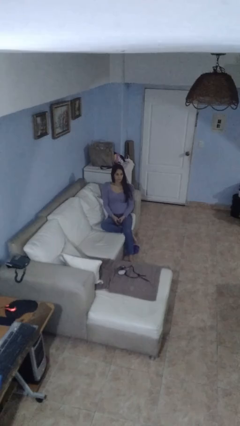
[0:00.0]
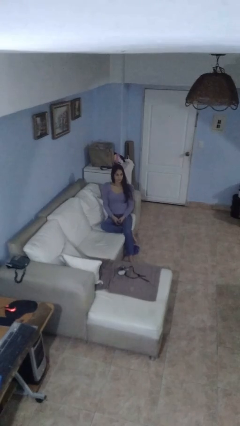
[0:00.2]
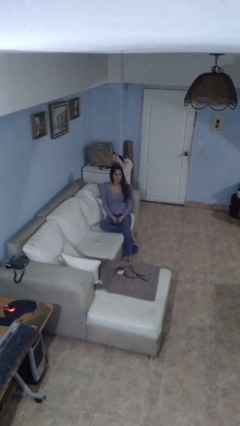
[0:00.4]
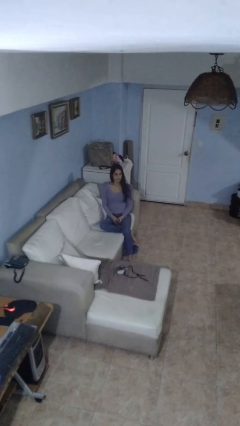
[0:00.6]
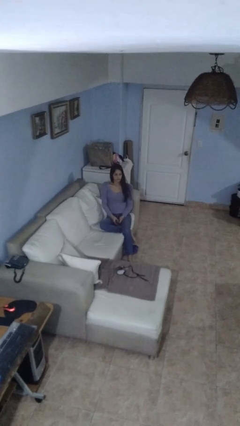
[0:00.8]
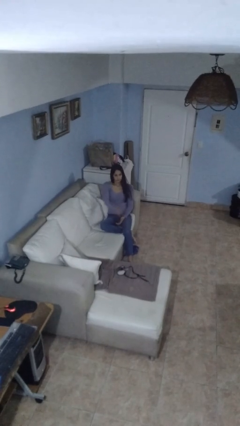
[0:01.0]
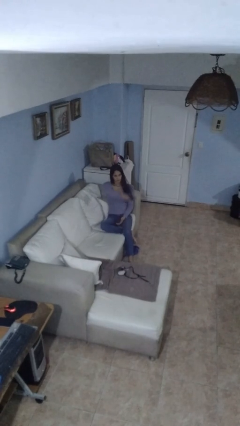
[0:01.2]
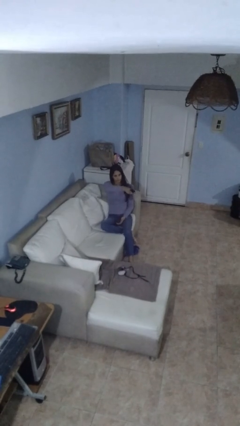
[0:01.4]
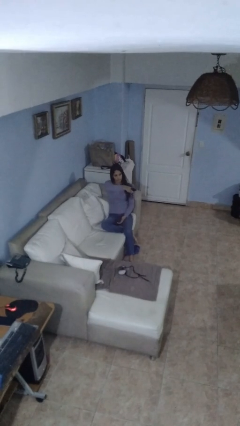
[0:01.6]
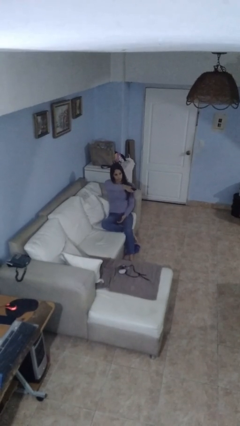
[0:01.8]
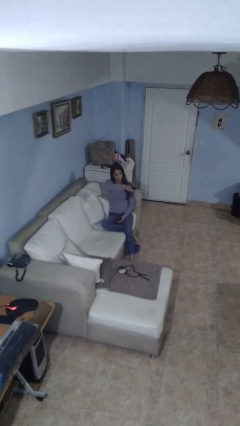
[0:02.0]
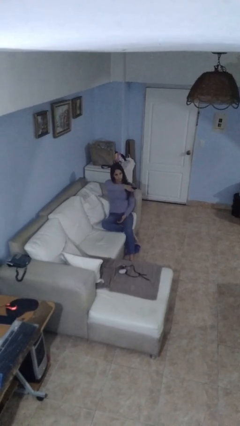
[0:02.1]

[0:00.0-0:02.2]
person uses television remote

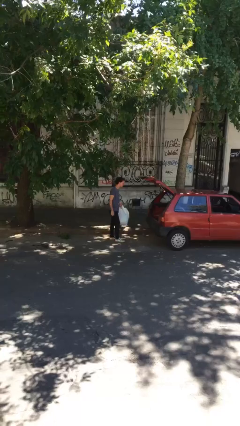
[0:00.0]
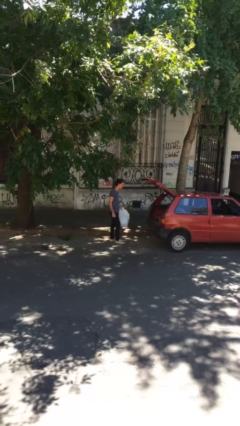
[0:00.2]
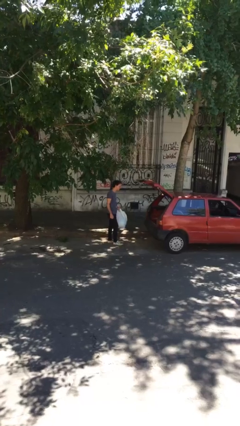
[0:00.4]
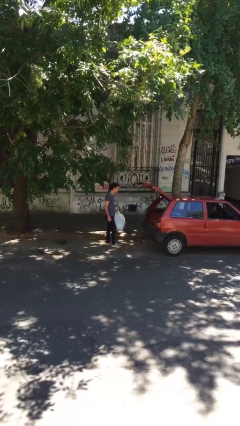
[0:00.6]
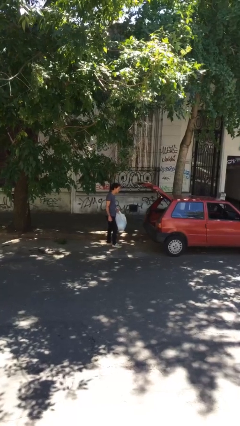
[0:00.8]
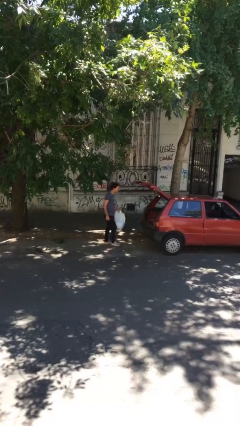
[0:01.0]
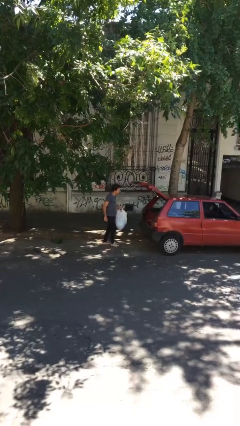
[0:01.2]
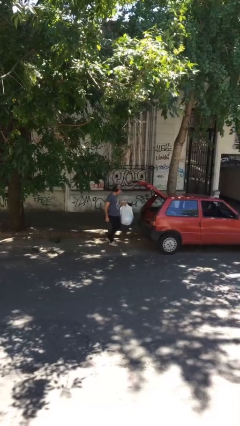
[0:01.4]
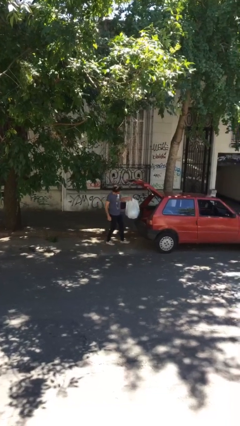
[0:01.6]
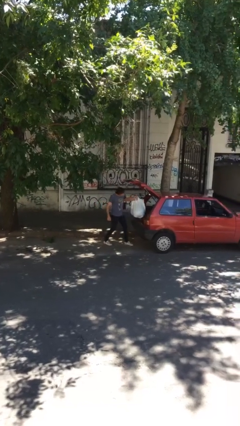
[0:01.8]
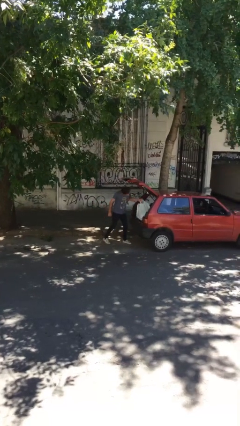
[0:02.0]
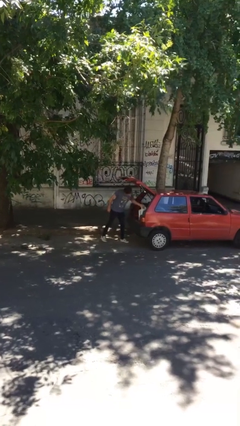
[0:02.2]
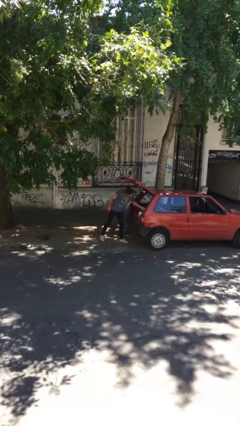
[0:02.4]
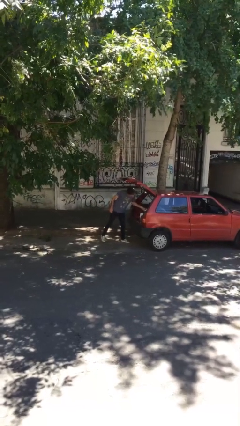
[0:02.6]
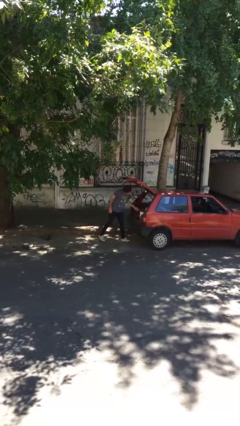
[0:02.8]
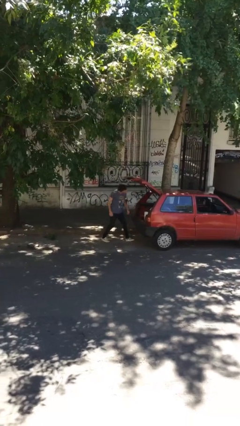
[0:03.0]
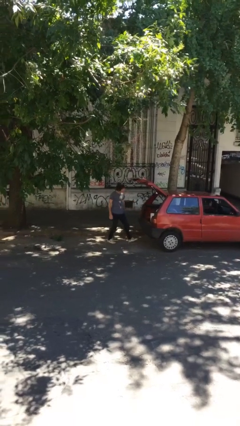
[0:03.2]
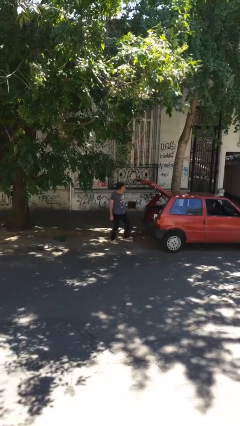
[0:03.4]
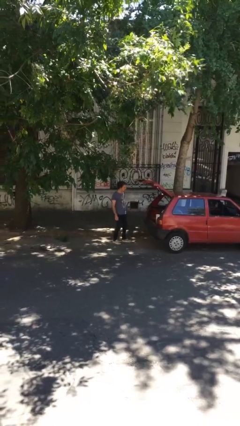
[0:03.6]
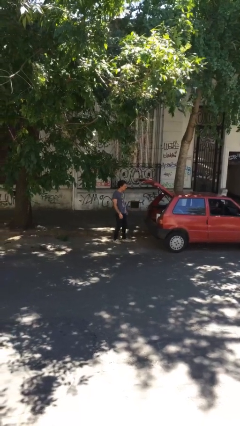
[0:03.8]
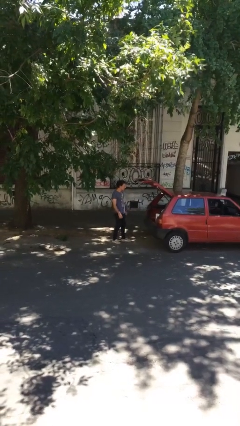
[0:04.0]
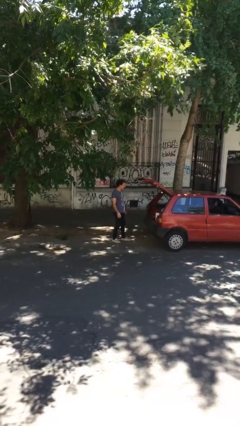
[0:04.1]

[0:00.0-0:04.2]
person loads car

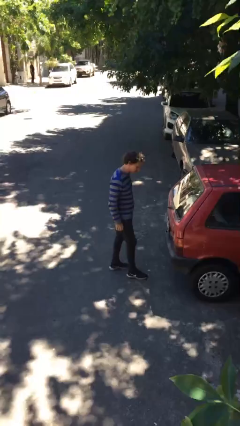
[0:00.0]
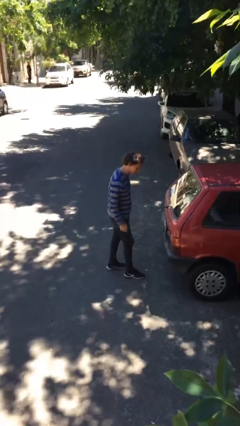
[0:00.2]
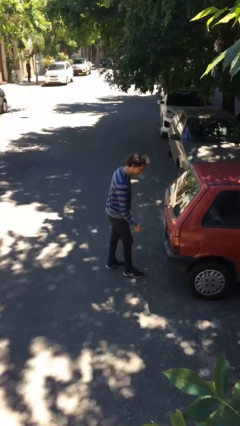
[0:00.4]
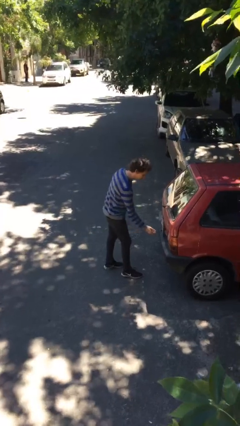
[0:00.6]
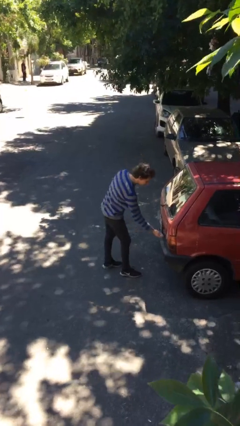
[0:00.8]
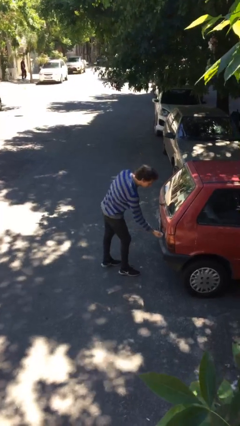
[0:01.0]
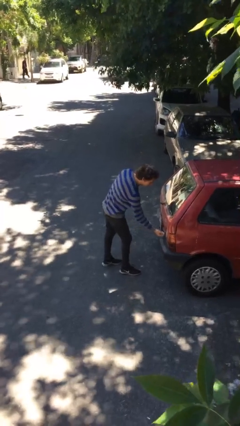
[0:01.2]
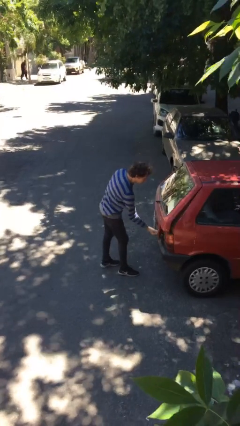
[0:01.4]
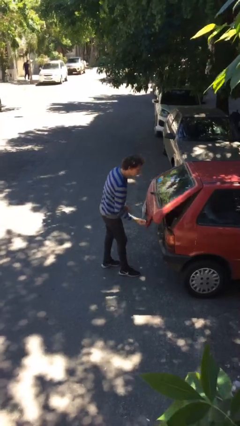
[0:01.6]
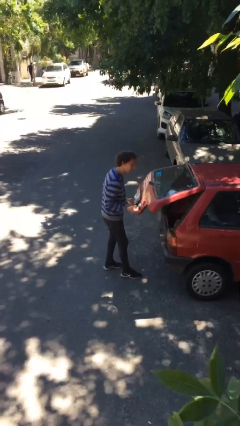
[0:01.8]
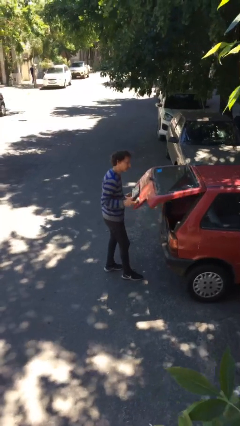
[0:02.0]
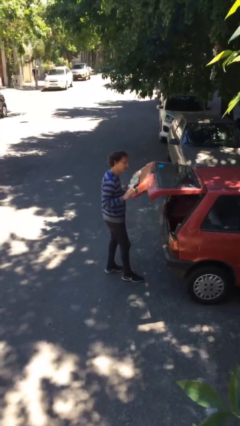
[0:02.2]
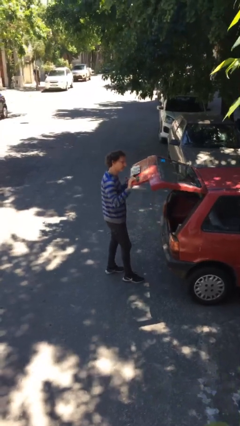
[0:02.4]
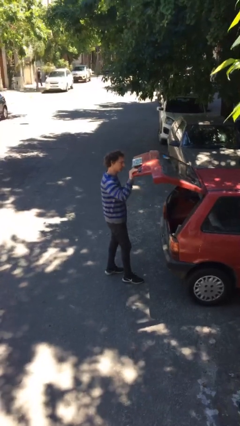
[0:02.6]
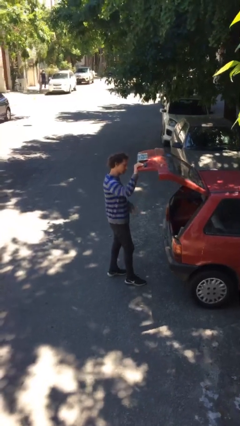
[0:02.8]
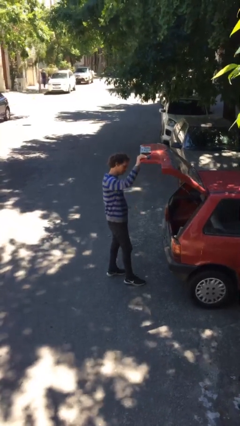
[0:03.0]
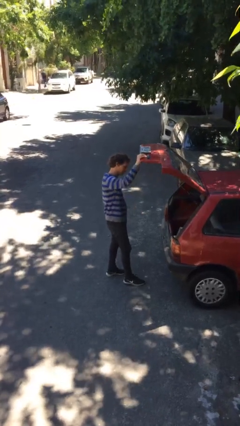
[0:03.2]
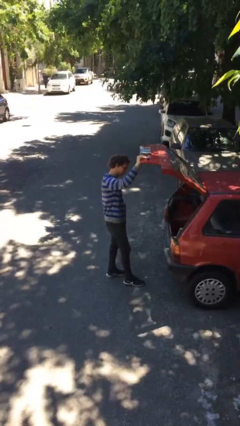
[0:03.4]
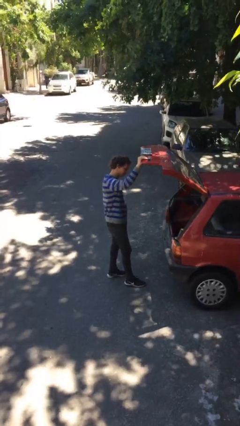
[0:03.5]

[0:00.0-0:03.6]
person opens car trunk

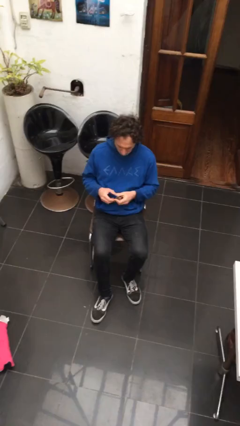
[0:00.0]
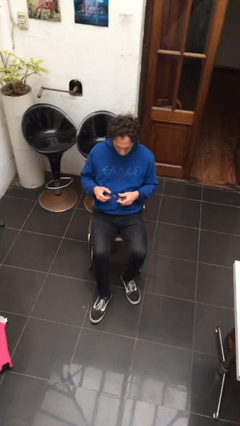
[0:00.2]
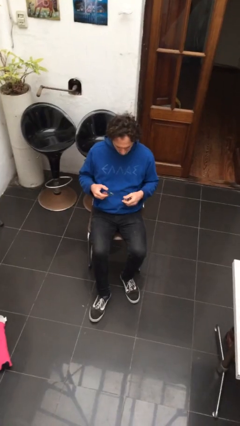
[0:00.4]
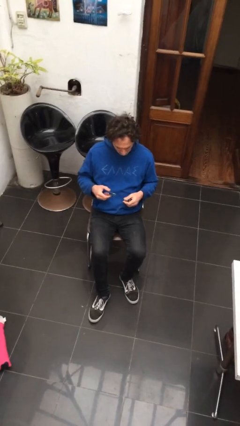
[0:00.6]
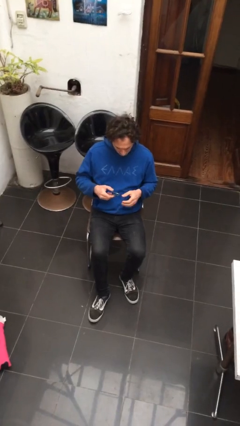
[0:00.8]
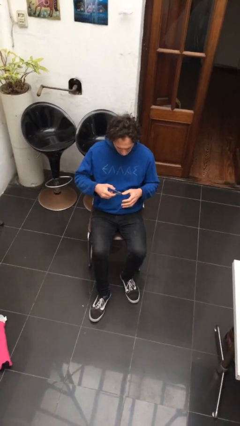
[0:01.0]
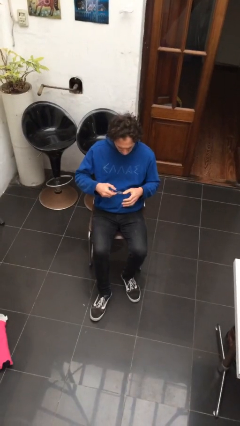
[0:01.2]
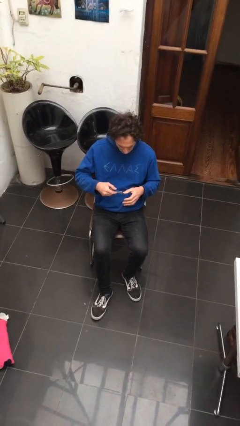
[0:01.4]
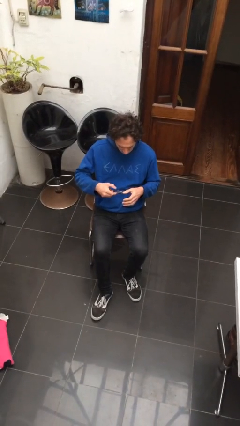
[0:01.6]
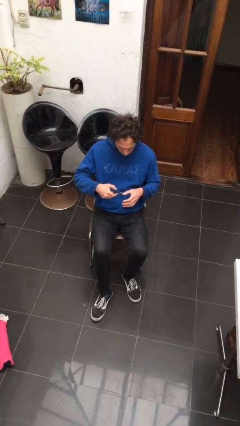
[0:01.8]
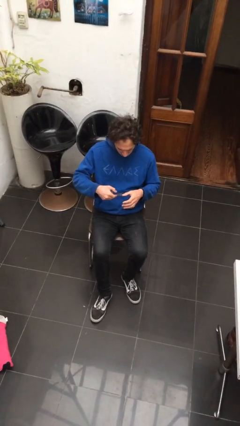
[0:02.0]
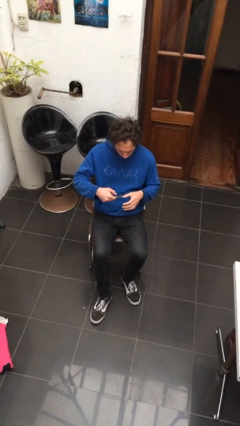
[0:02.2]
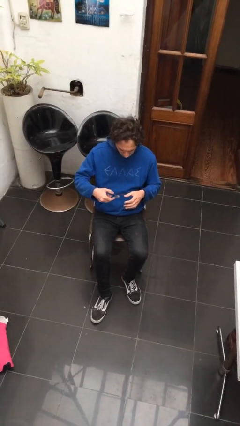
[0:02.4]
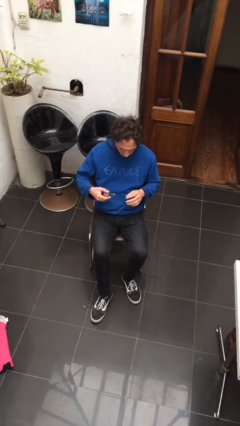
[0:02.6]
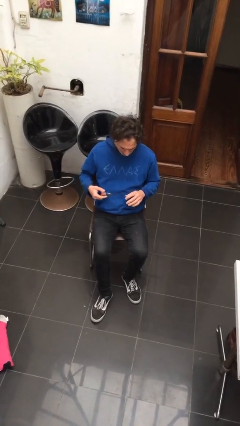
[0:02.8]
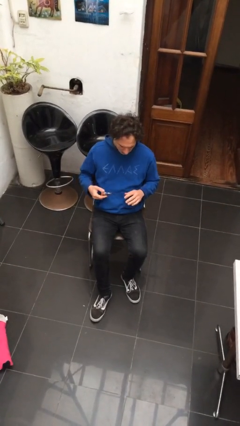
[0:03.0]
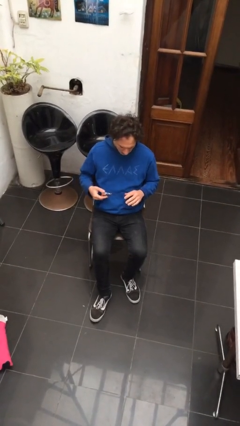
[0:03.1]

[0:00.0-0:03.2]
person clips fingernails

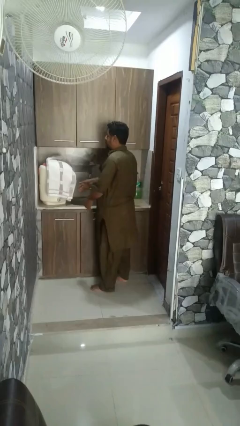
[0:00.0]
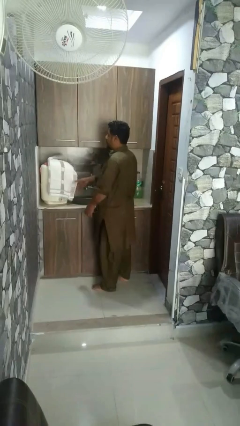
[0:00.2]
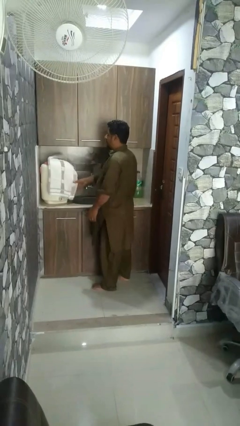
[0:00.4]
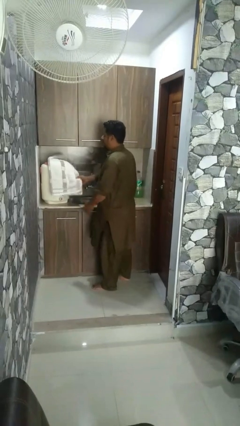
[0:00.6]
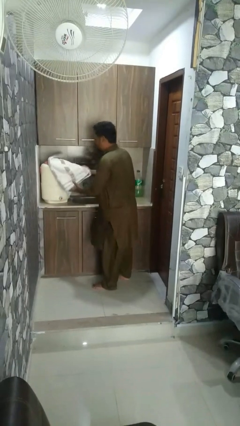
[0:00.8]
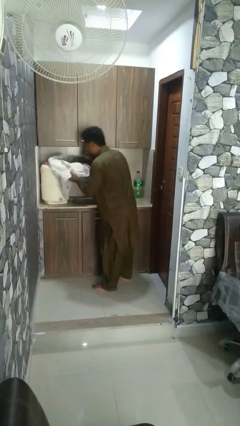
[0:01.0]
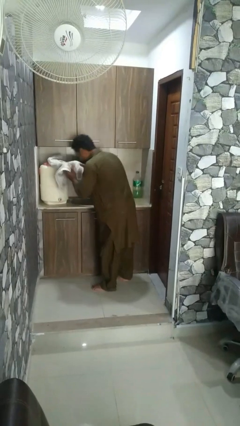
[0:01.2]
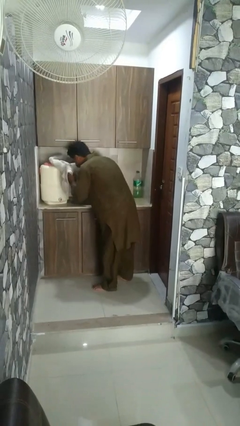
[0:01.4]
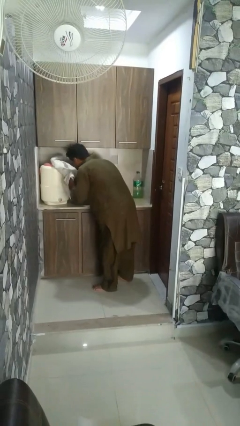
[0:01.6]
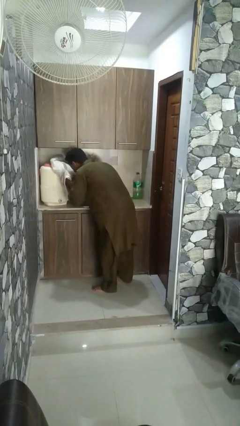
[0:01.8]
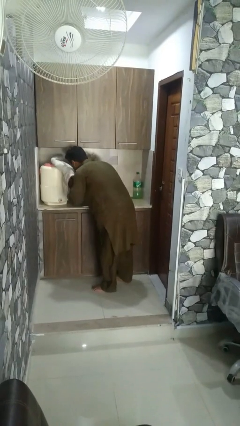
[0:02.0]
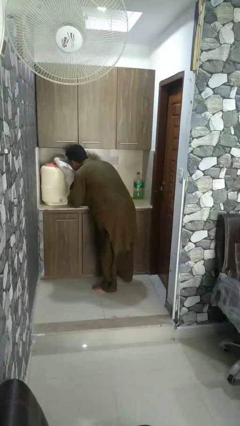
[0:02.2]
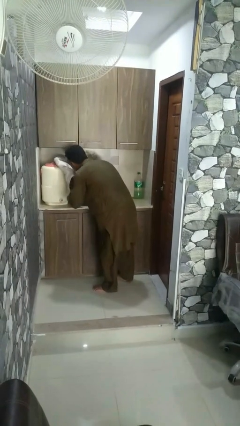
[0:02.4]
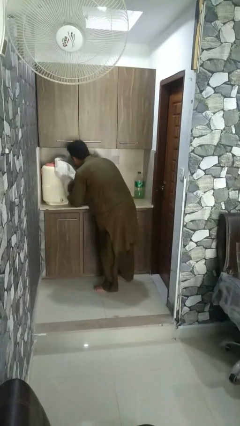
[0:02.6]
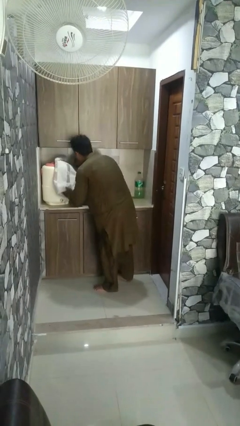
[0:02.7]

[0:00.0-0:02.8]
person dries face with towel

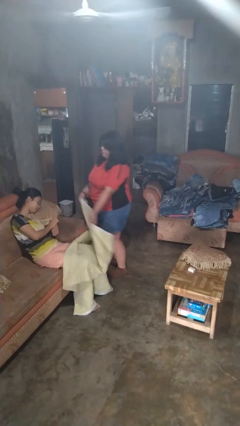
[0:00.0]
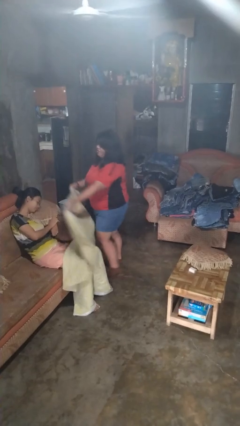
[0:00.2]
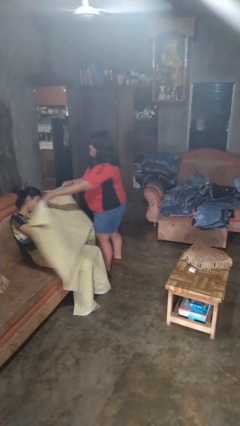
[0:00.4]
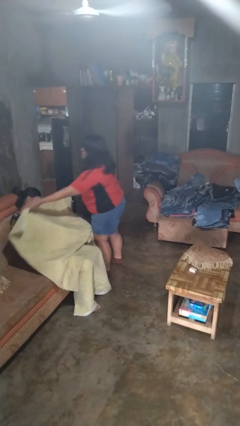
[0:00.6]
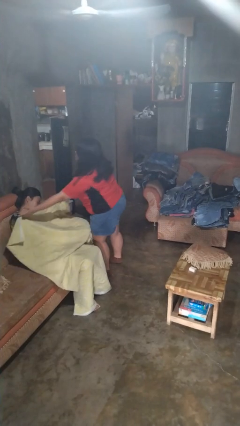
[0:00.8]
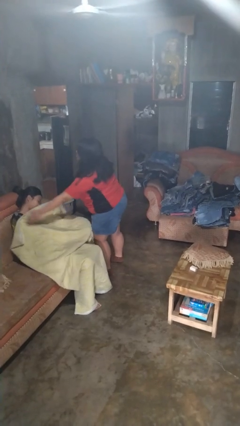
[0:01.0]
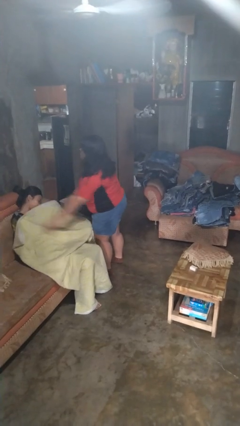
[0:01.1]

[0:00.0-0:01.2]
person covers friend with blanket

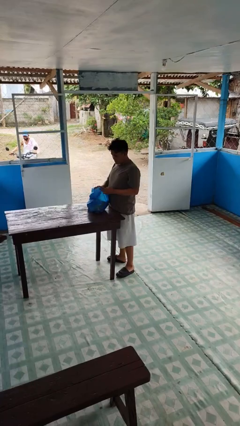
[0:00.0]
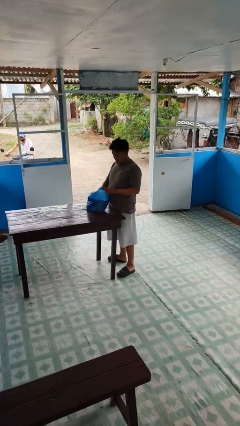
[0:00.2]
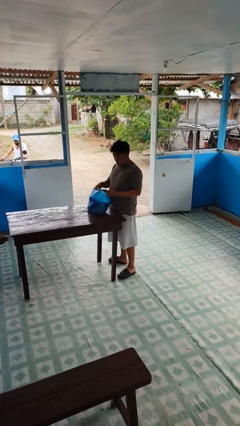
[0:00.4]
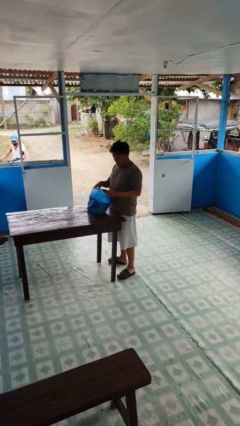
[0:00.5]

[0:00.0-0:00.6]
person puts object into bag
